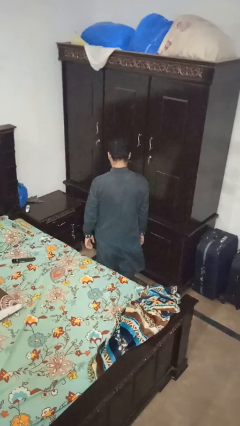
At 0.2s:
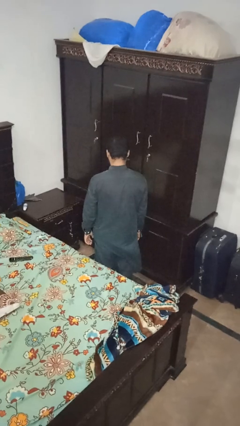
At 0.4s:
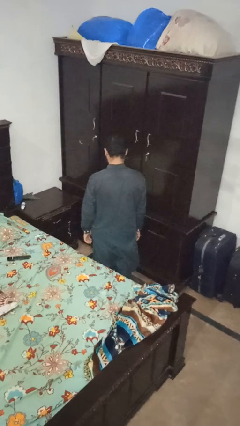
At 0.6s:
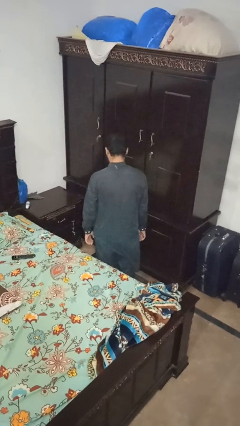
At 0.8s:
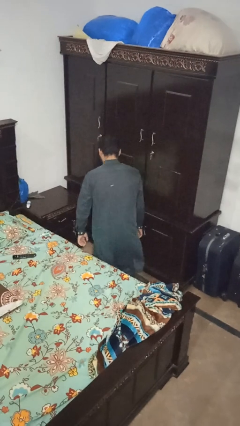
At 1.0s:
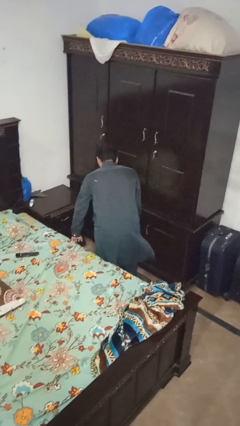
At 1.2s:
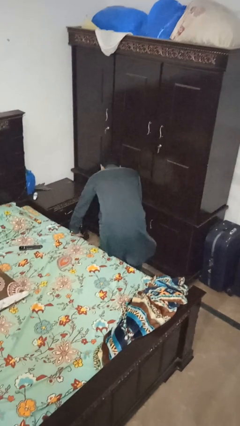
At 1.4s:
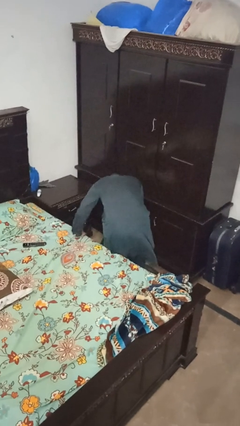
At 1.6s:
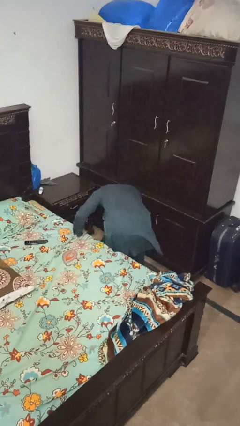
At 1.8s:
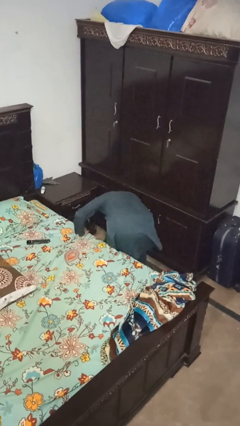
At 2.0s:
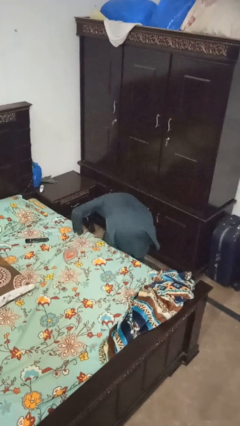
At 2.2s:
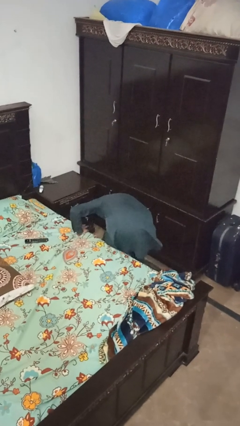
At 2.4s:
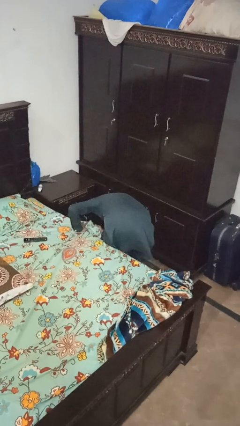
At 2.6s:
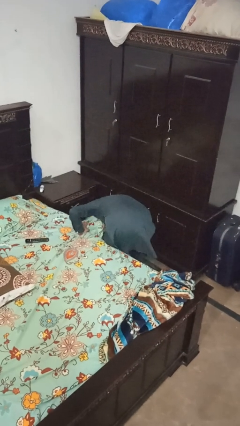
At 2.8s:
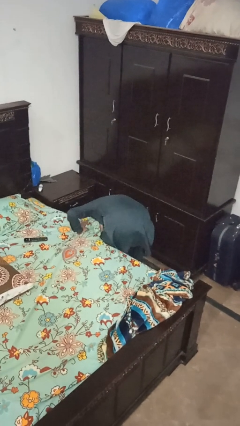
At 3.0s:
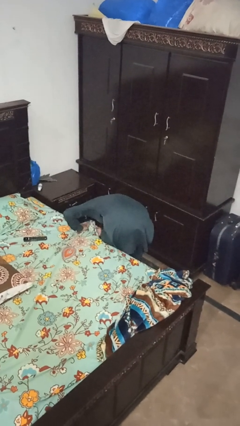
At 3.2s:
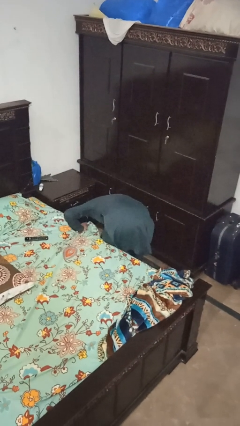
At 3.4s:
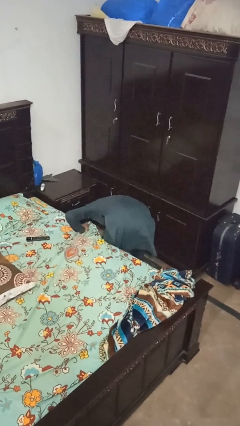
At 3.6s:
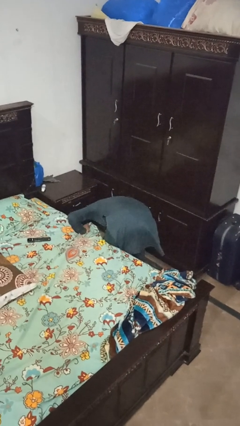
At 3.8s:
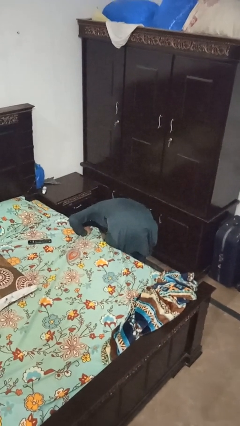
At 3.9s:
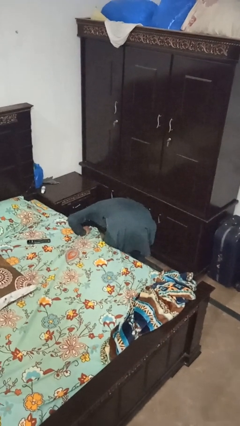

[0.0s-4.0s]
person searches under bed

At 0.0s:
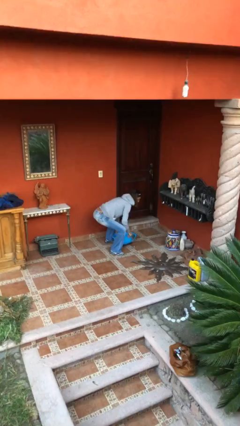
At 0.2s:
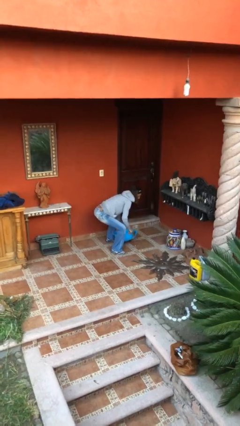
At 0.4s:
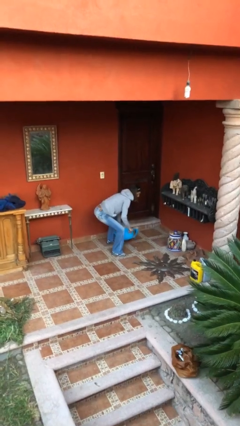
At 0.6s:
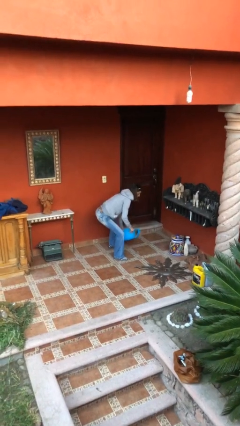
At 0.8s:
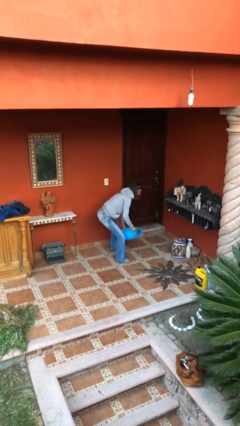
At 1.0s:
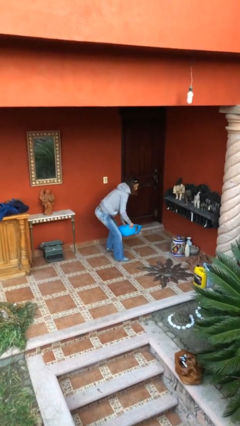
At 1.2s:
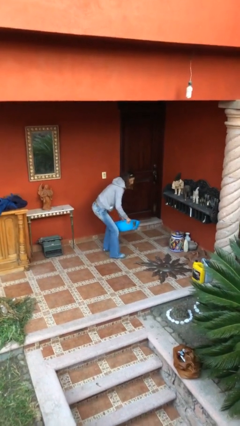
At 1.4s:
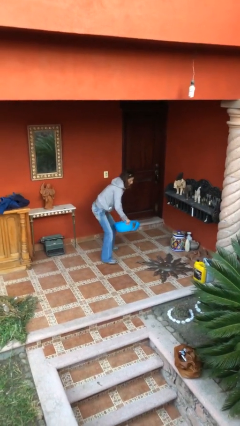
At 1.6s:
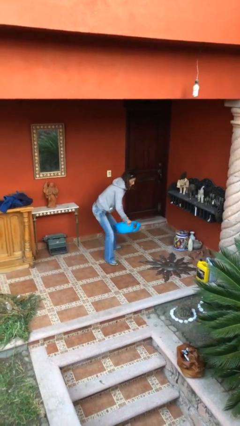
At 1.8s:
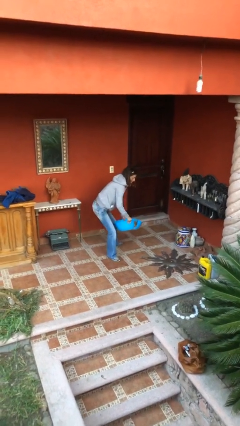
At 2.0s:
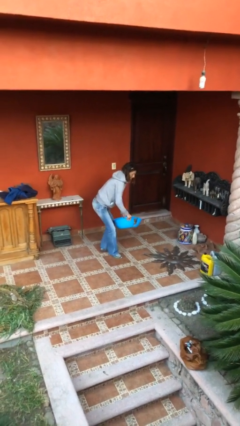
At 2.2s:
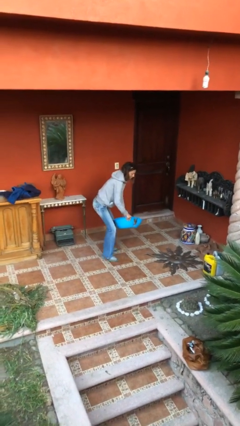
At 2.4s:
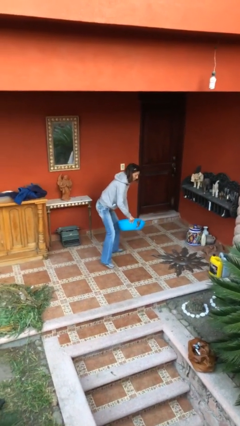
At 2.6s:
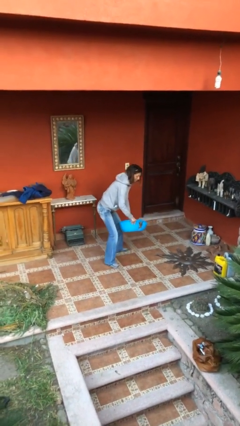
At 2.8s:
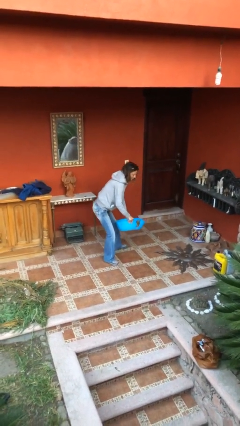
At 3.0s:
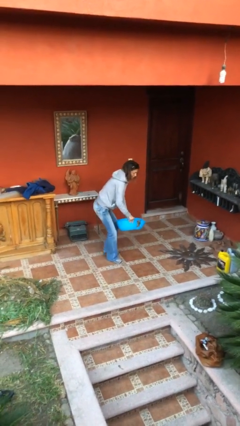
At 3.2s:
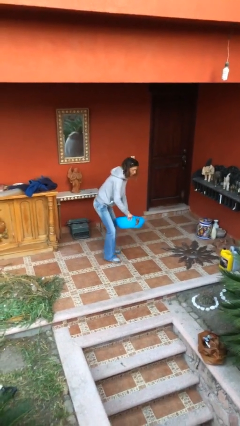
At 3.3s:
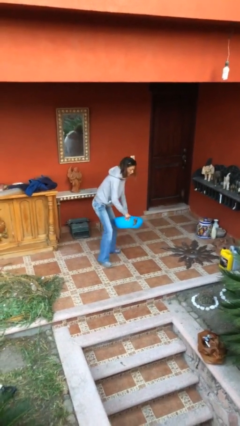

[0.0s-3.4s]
person carries heavy object

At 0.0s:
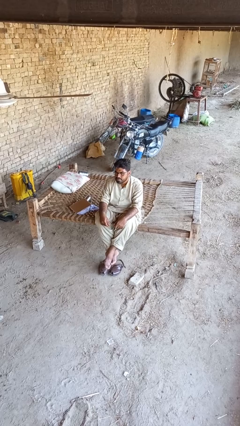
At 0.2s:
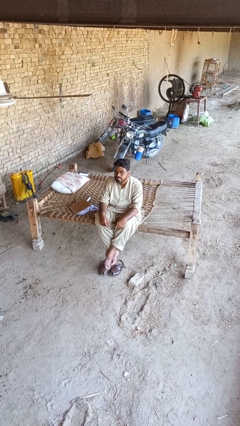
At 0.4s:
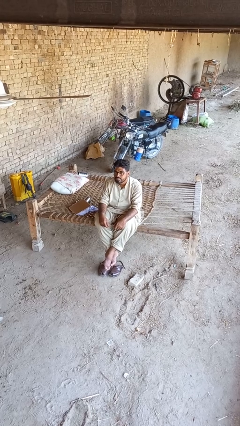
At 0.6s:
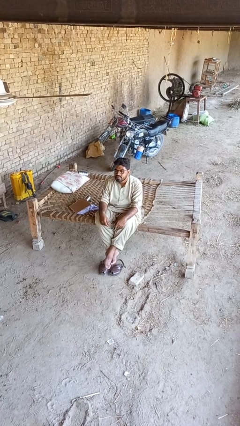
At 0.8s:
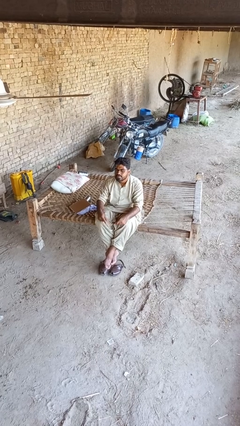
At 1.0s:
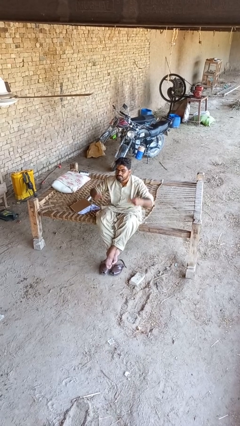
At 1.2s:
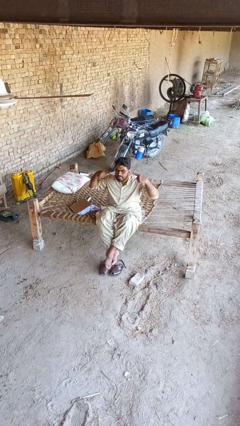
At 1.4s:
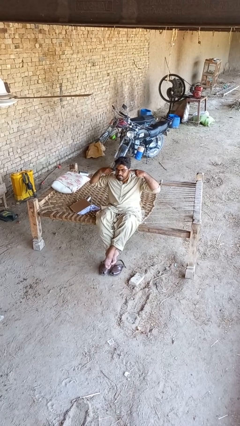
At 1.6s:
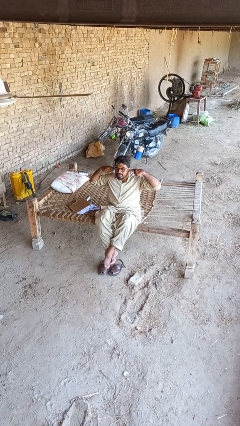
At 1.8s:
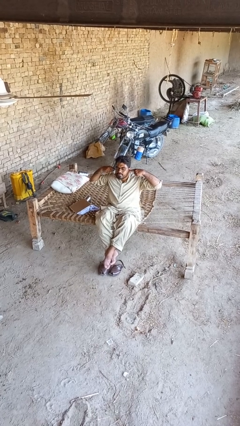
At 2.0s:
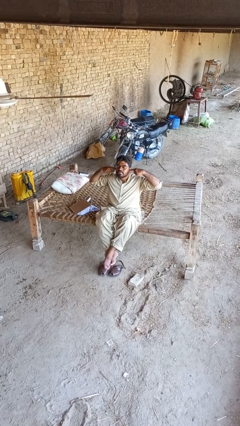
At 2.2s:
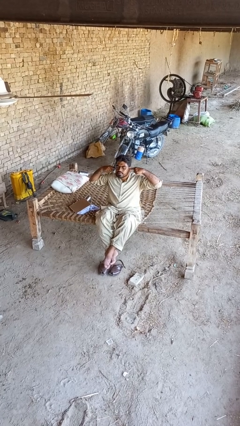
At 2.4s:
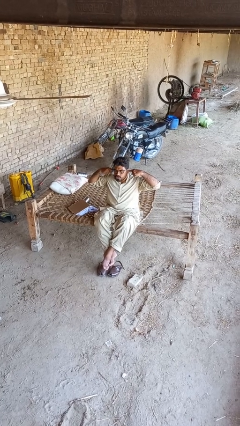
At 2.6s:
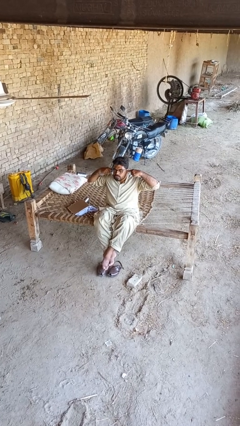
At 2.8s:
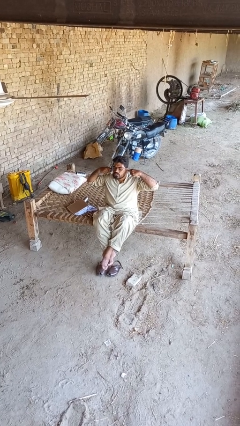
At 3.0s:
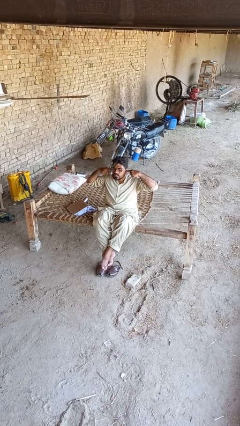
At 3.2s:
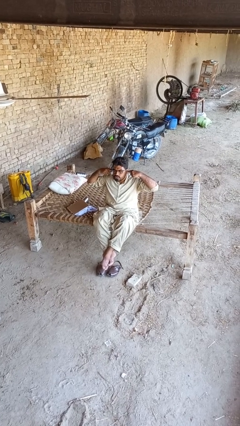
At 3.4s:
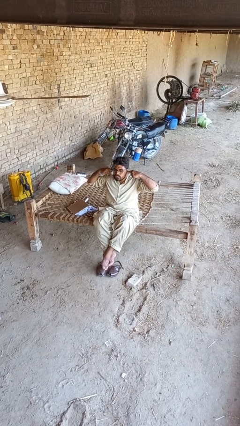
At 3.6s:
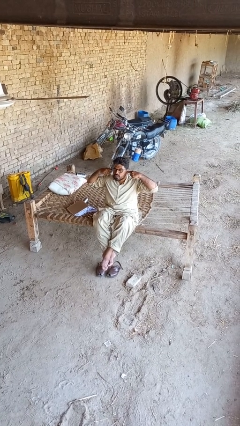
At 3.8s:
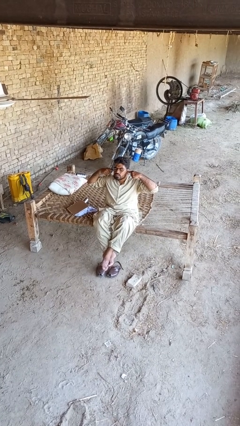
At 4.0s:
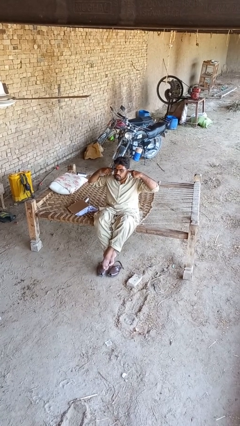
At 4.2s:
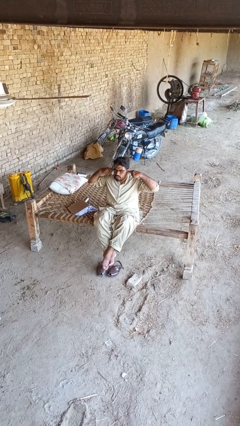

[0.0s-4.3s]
person puts fingers in ear

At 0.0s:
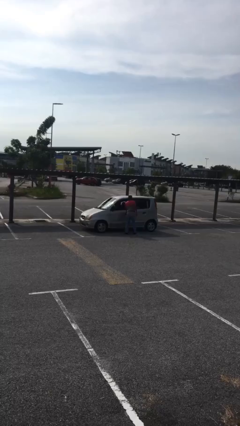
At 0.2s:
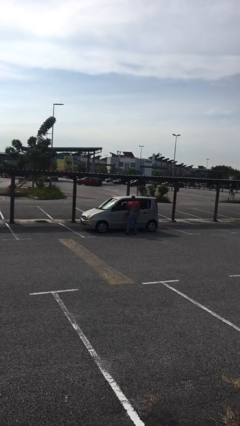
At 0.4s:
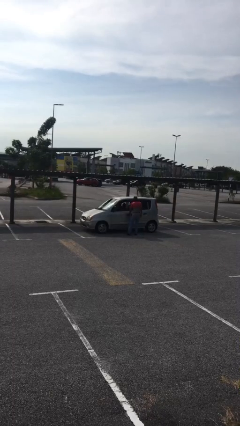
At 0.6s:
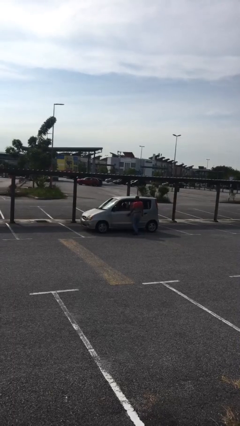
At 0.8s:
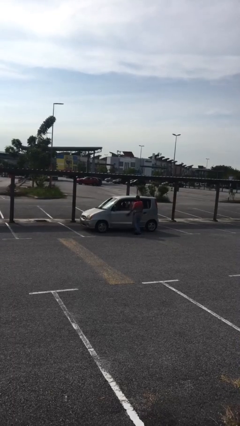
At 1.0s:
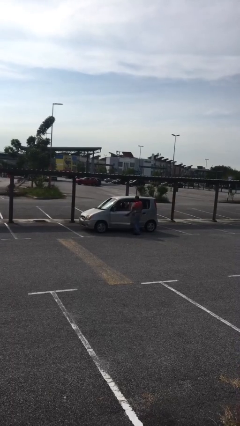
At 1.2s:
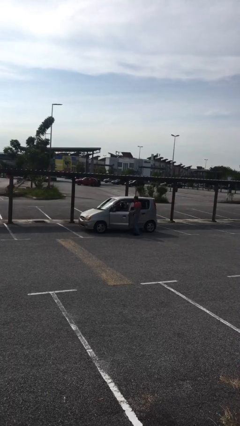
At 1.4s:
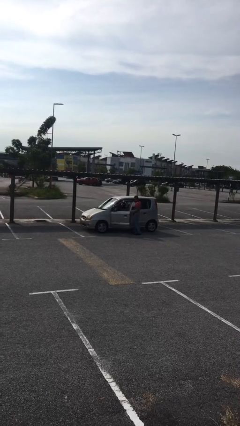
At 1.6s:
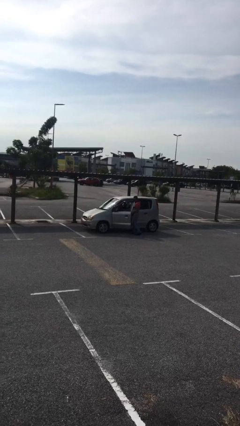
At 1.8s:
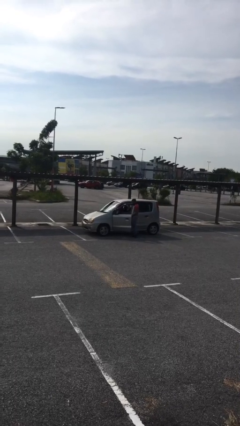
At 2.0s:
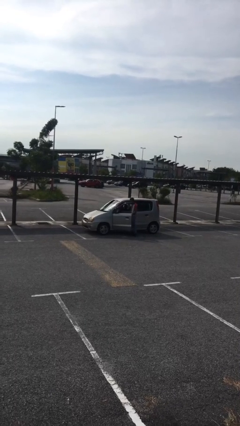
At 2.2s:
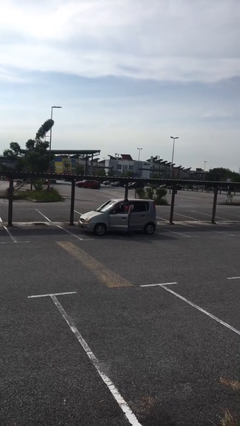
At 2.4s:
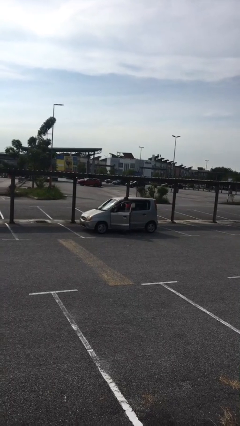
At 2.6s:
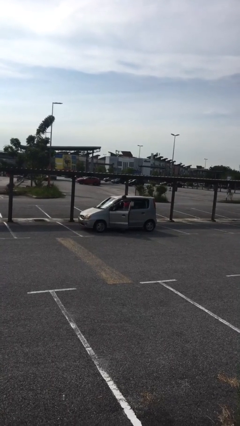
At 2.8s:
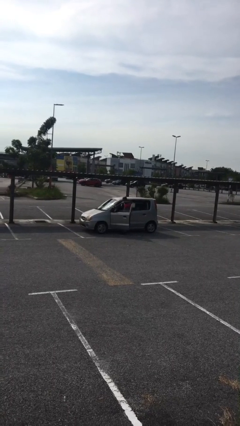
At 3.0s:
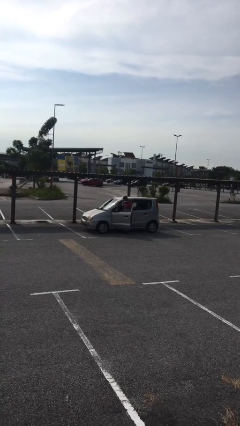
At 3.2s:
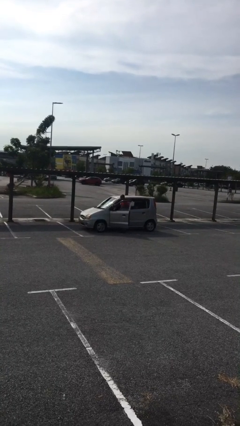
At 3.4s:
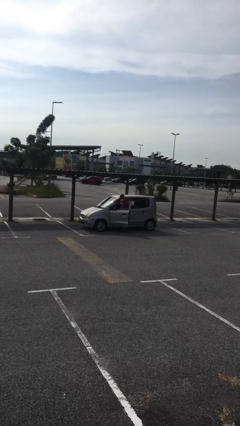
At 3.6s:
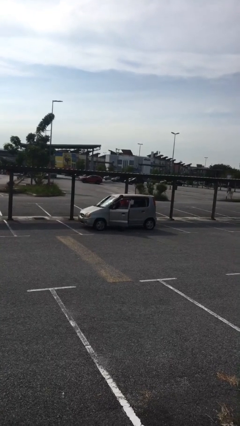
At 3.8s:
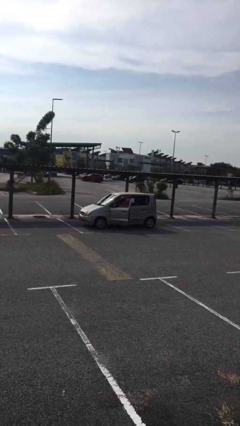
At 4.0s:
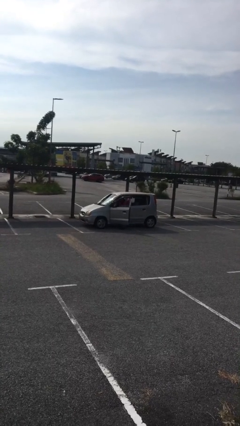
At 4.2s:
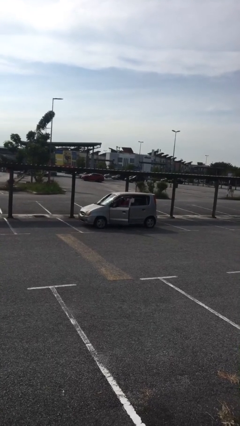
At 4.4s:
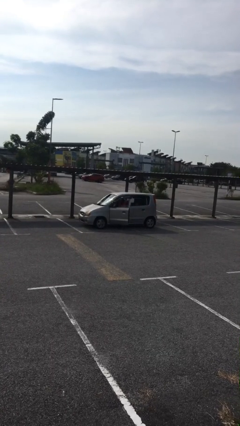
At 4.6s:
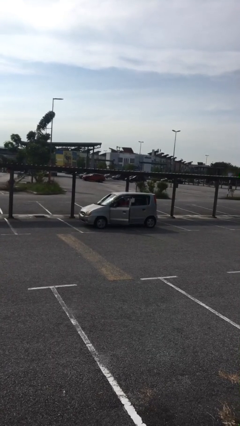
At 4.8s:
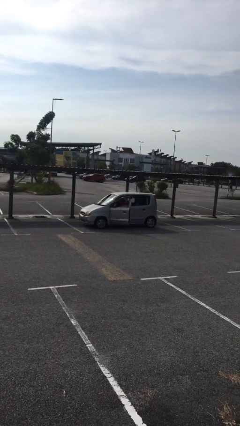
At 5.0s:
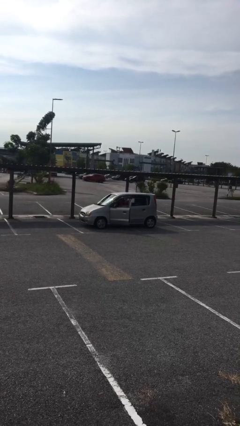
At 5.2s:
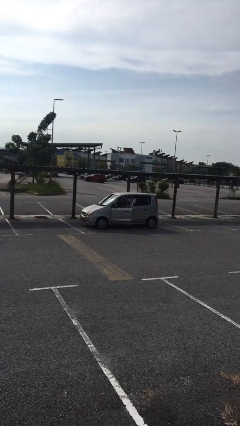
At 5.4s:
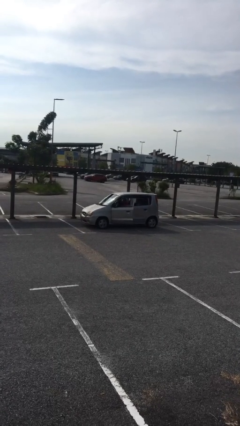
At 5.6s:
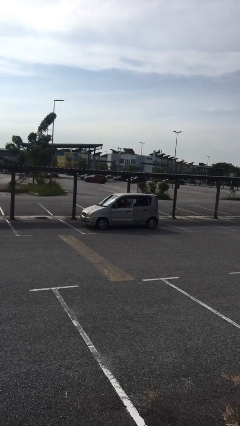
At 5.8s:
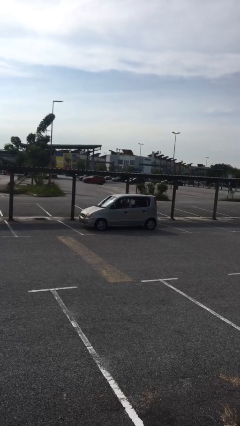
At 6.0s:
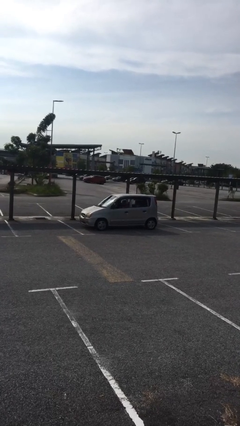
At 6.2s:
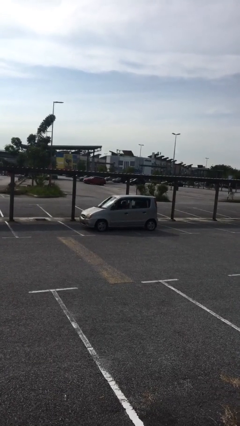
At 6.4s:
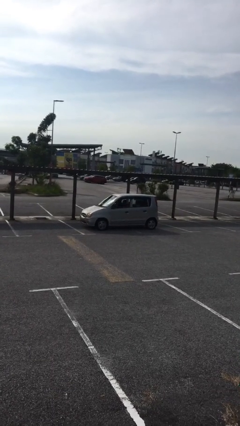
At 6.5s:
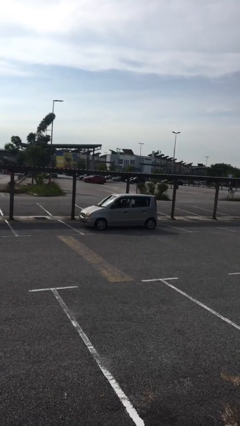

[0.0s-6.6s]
car picks up person
